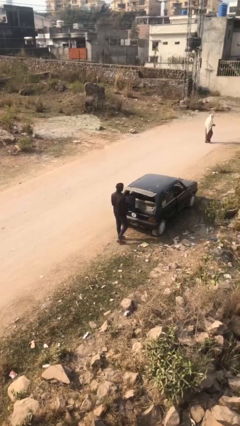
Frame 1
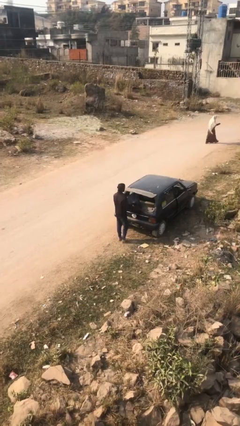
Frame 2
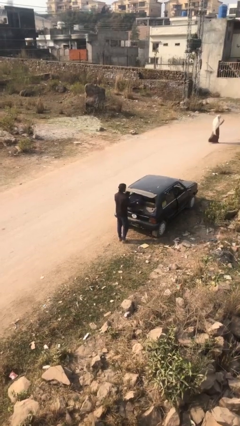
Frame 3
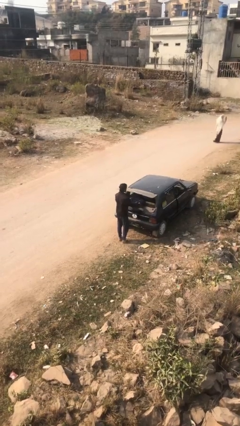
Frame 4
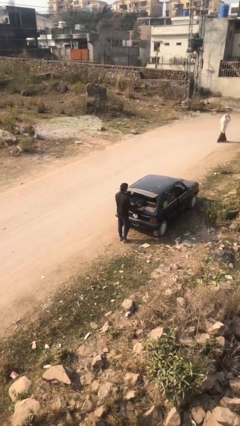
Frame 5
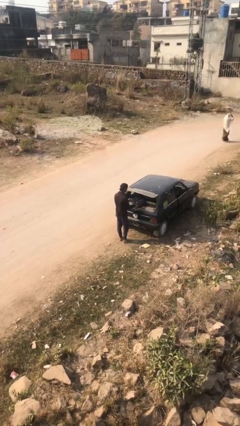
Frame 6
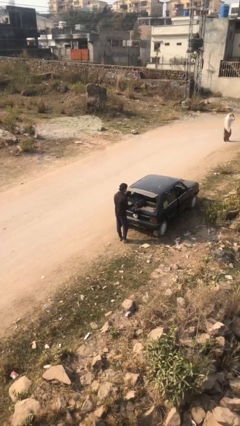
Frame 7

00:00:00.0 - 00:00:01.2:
person loads car

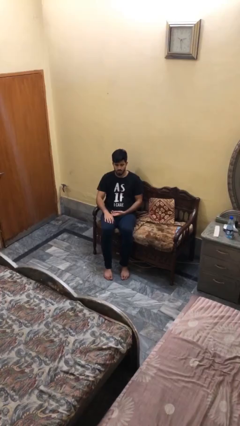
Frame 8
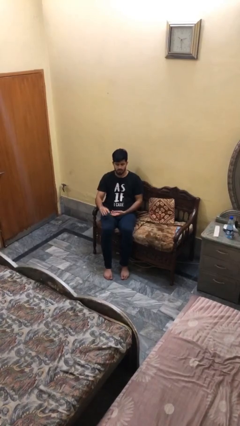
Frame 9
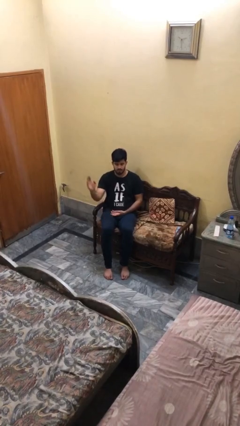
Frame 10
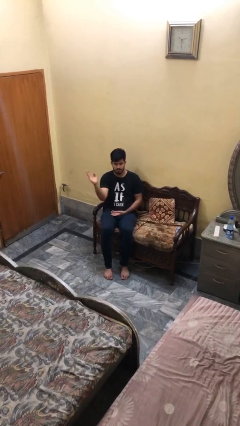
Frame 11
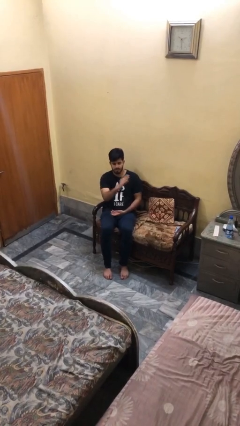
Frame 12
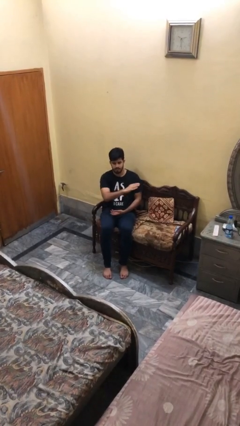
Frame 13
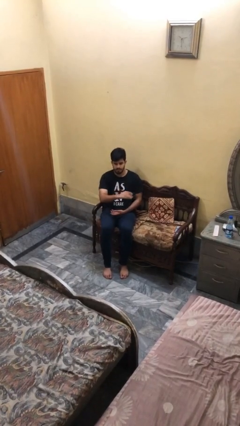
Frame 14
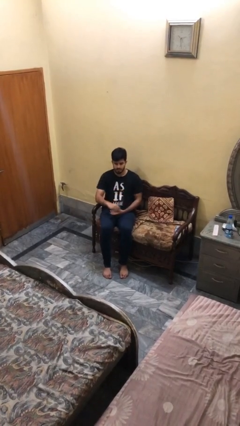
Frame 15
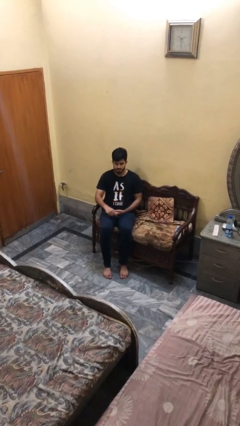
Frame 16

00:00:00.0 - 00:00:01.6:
person gestures swipe left

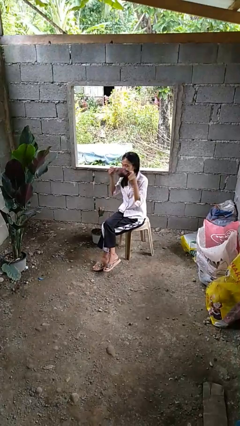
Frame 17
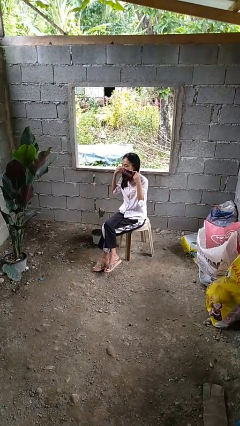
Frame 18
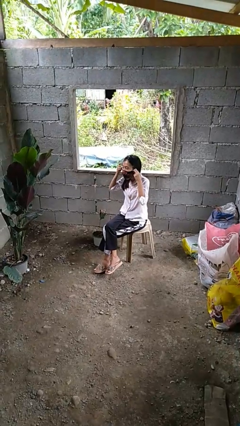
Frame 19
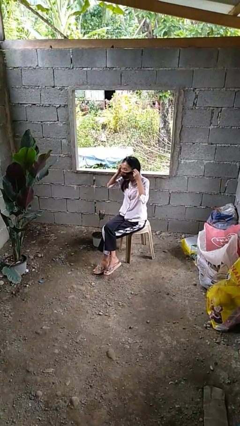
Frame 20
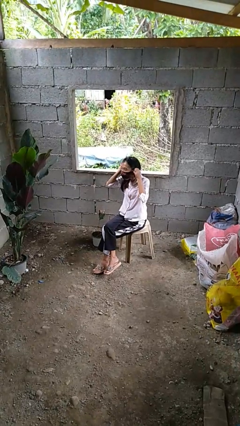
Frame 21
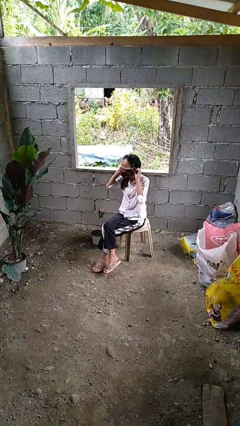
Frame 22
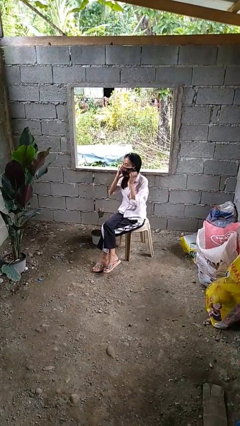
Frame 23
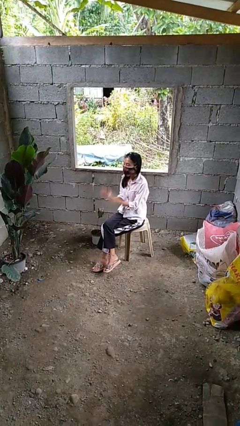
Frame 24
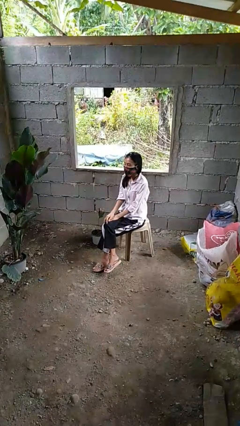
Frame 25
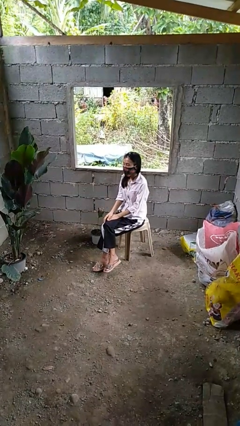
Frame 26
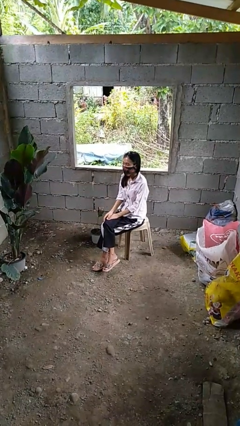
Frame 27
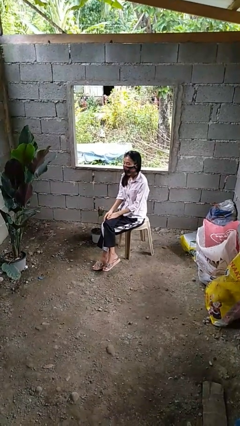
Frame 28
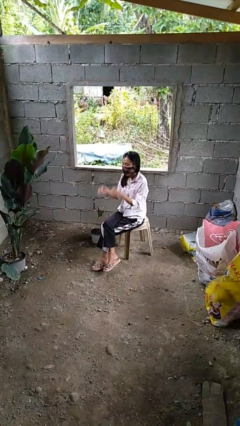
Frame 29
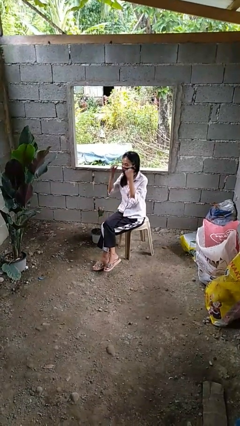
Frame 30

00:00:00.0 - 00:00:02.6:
person puts on facemask

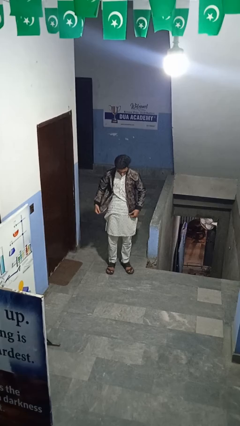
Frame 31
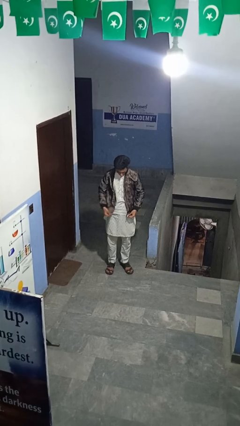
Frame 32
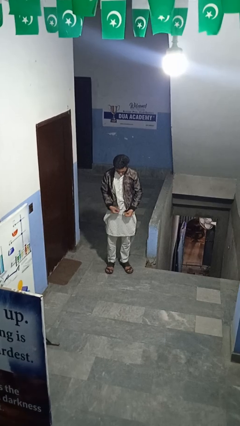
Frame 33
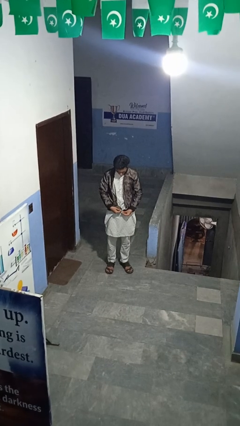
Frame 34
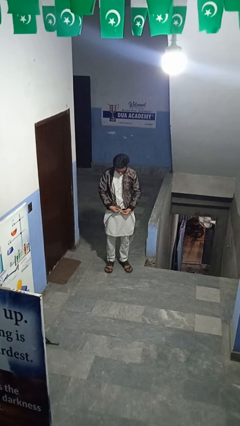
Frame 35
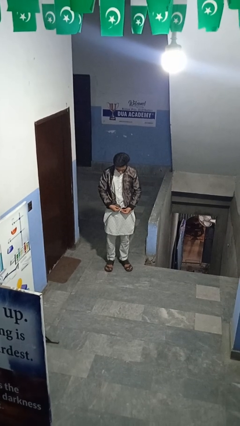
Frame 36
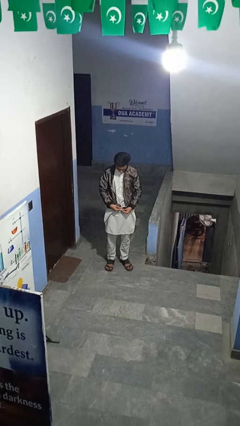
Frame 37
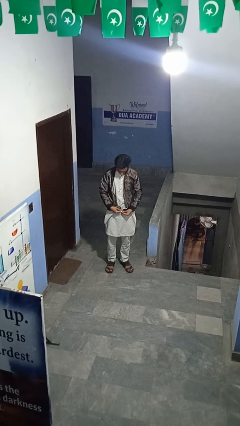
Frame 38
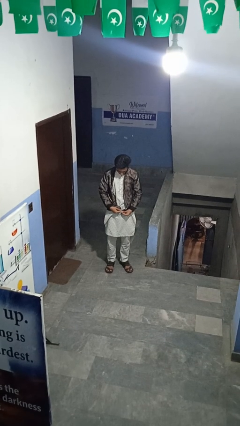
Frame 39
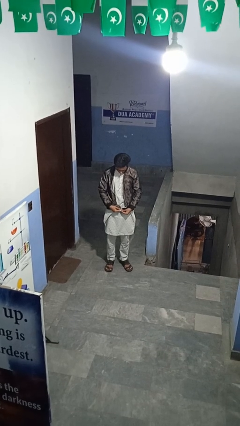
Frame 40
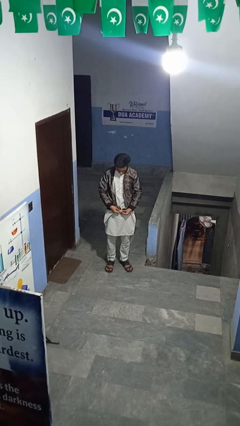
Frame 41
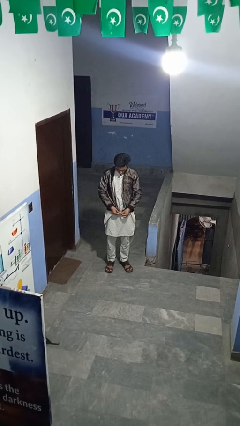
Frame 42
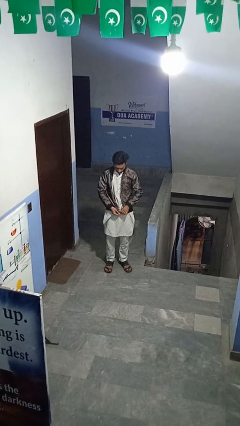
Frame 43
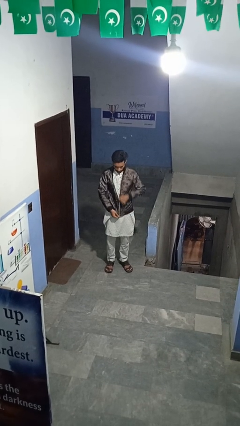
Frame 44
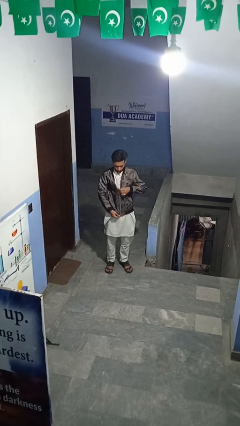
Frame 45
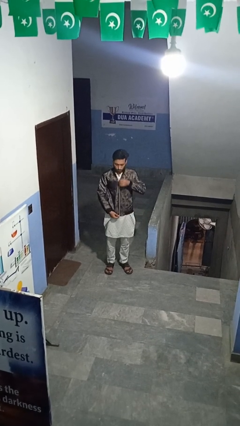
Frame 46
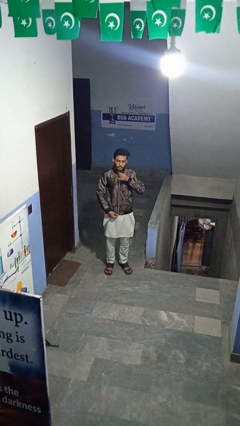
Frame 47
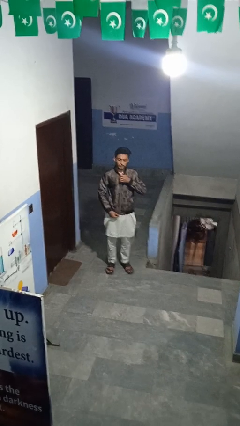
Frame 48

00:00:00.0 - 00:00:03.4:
person zips up jacket

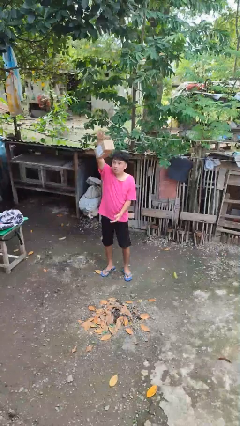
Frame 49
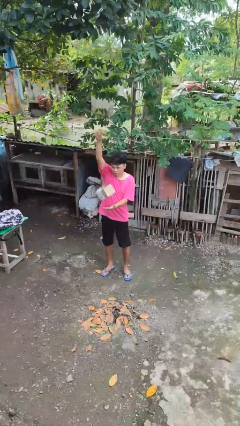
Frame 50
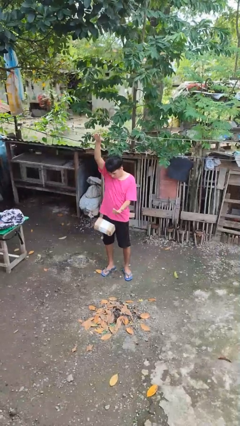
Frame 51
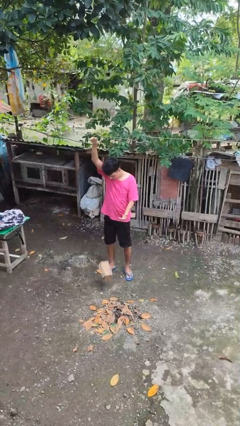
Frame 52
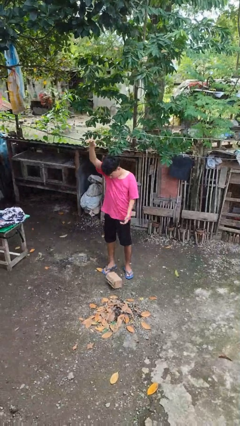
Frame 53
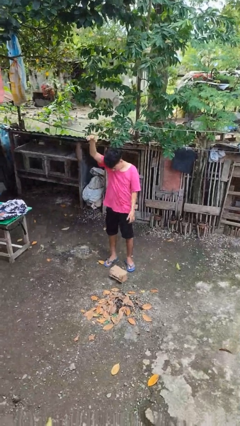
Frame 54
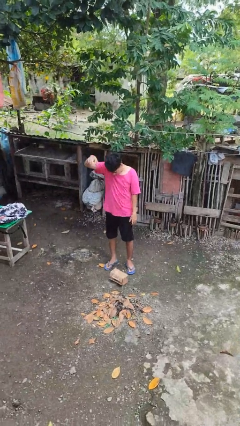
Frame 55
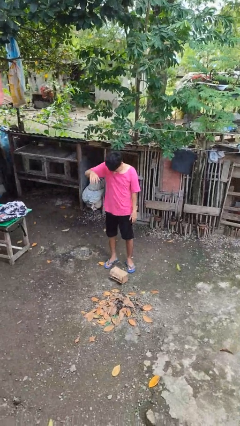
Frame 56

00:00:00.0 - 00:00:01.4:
person drops object

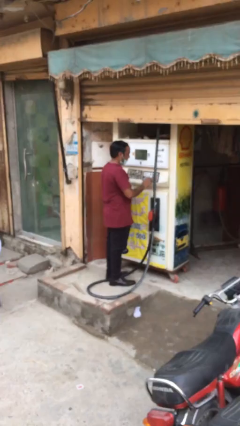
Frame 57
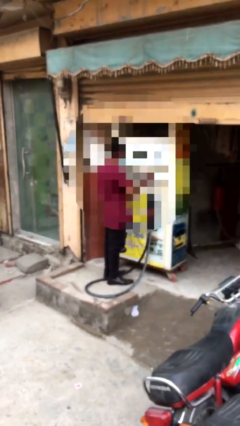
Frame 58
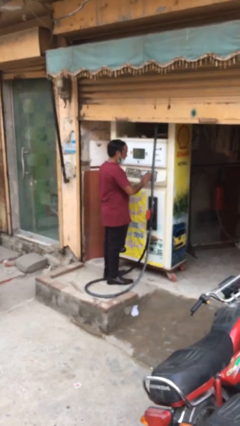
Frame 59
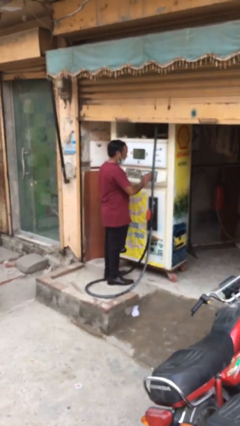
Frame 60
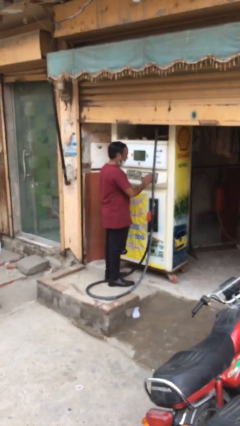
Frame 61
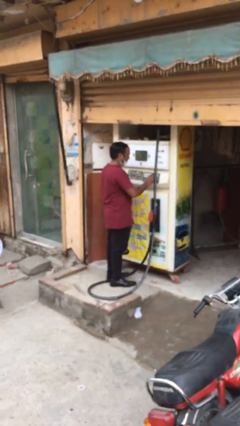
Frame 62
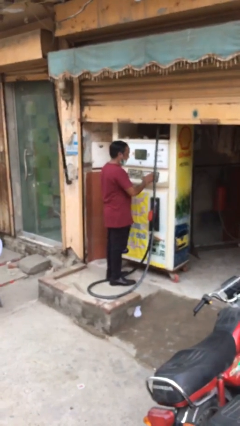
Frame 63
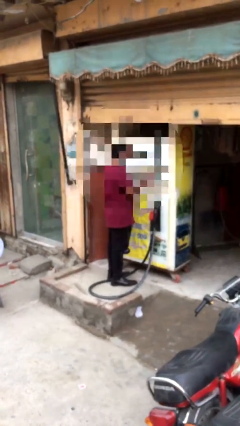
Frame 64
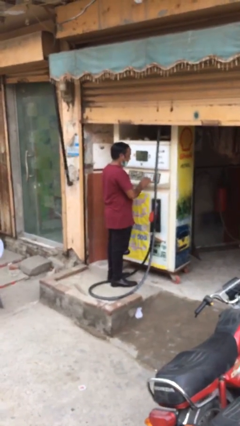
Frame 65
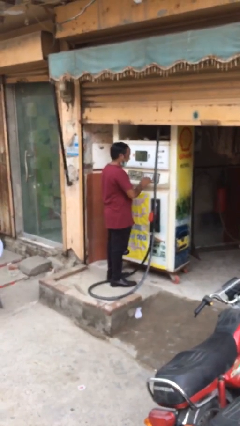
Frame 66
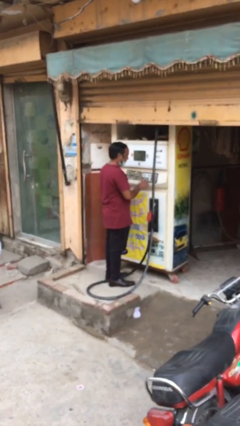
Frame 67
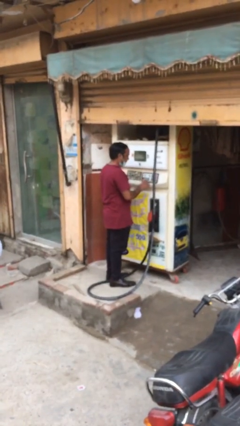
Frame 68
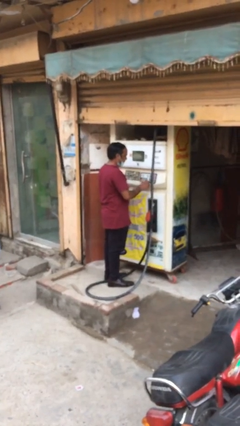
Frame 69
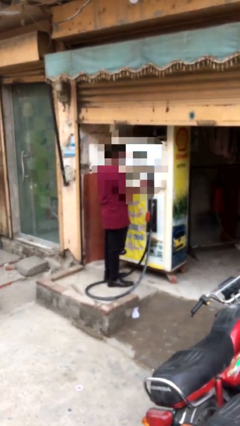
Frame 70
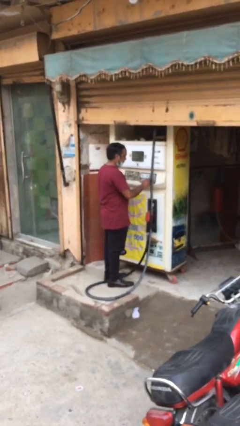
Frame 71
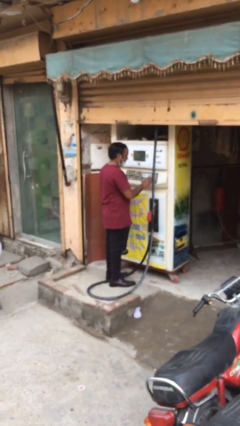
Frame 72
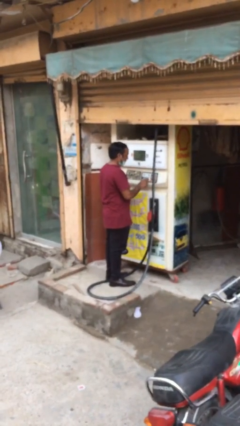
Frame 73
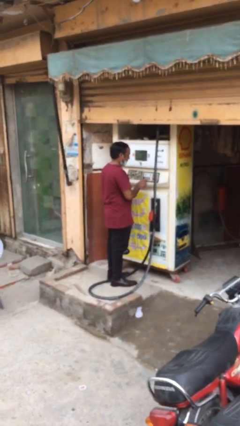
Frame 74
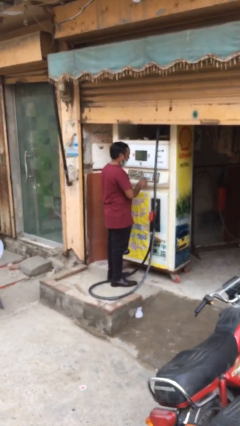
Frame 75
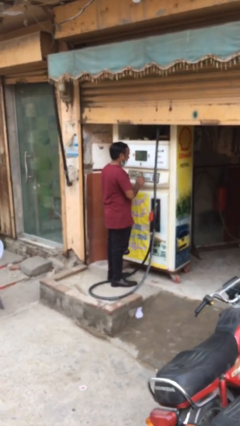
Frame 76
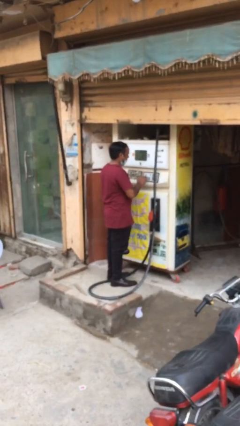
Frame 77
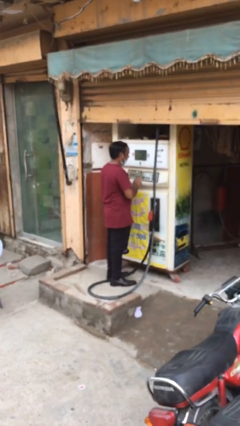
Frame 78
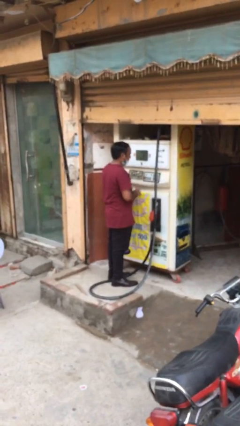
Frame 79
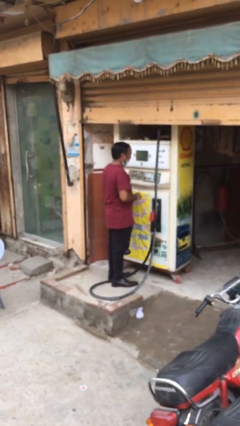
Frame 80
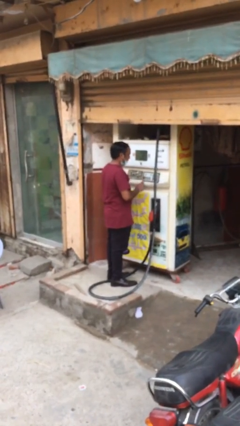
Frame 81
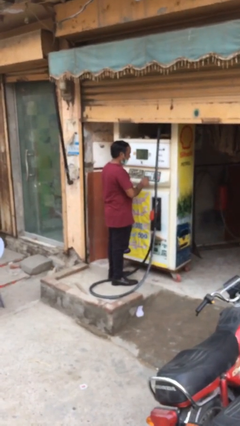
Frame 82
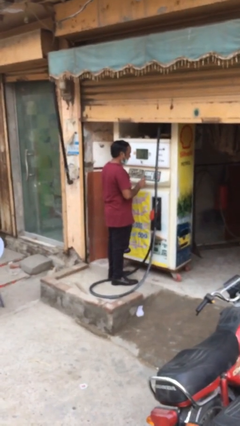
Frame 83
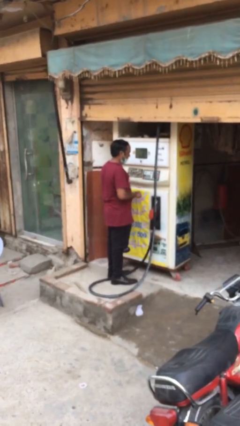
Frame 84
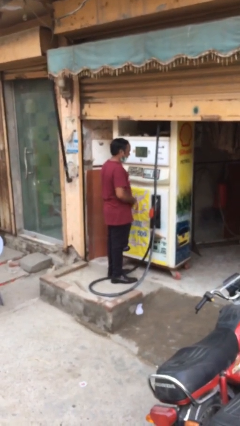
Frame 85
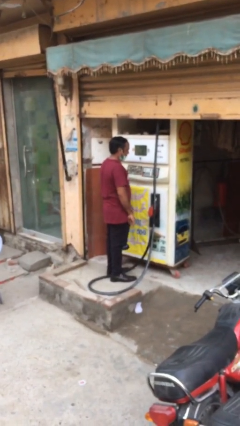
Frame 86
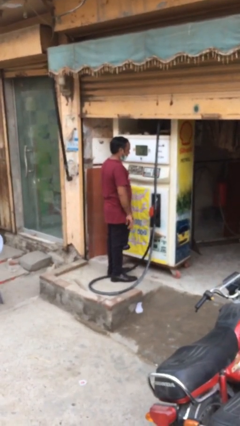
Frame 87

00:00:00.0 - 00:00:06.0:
person purchases from machine

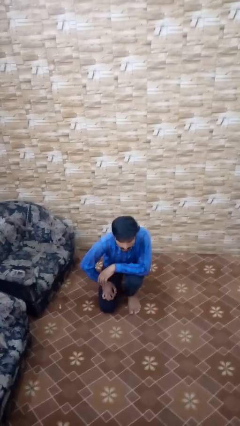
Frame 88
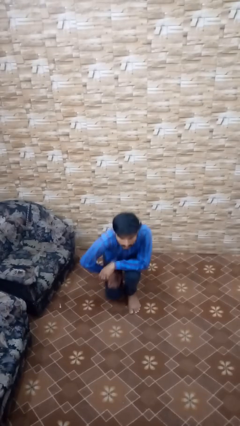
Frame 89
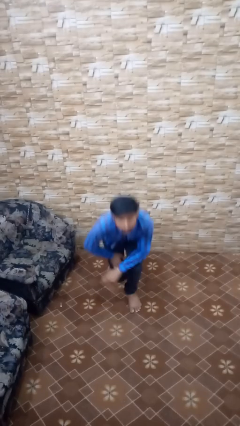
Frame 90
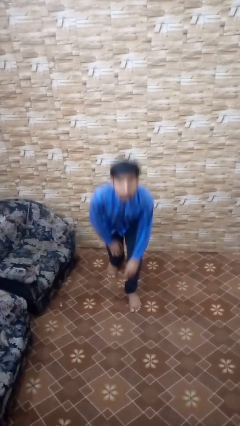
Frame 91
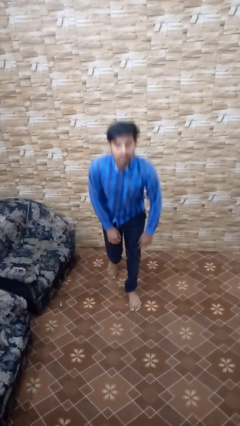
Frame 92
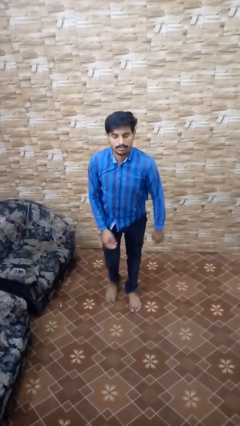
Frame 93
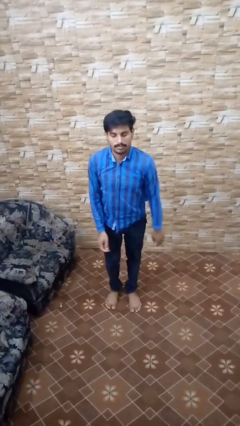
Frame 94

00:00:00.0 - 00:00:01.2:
person stands up from floor
